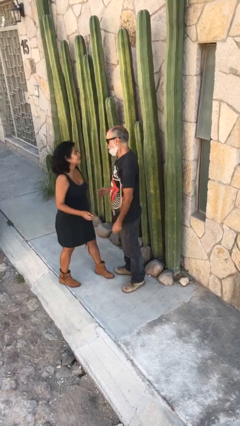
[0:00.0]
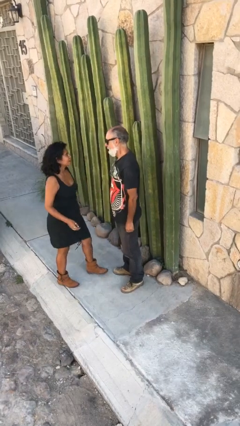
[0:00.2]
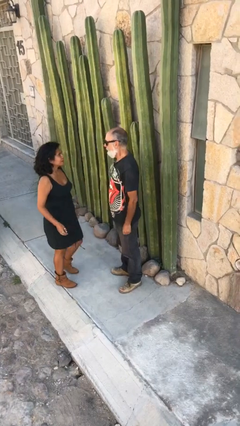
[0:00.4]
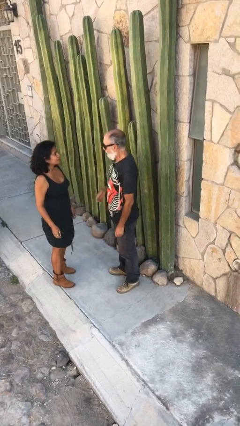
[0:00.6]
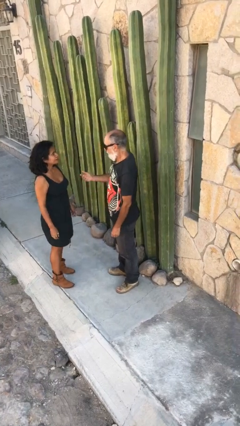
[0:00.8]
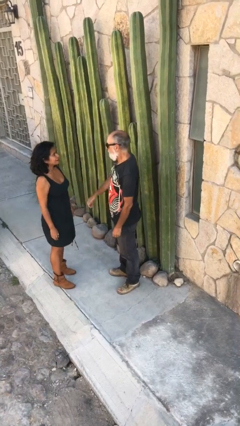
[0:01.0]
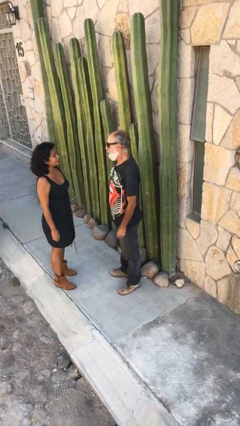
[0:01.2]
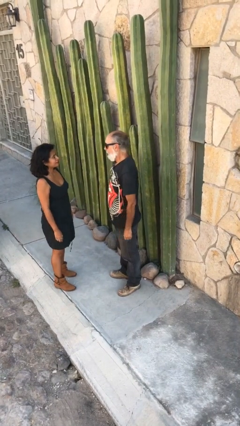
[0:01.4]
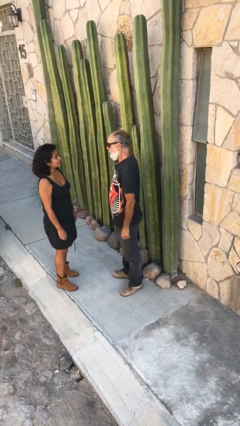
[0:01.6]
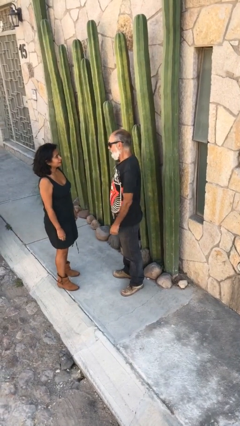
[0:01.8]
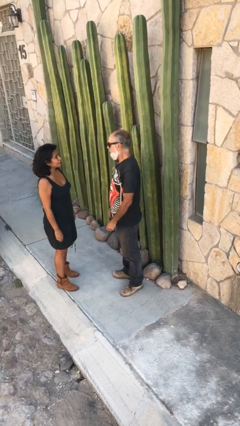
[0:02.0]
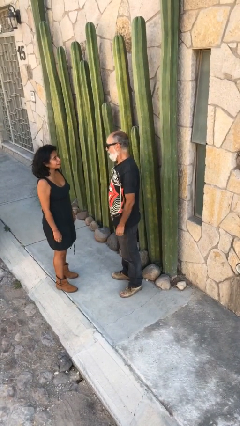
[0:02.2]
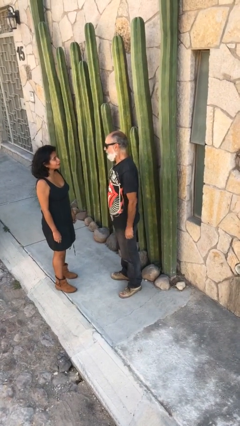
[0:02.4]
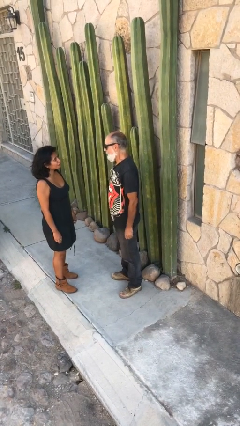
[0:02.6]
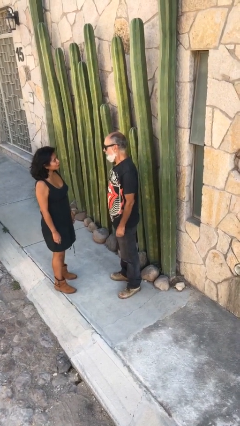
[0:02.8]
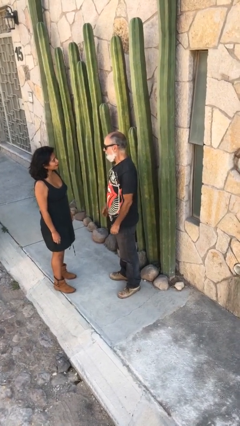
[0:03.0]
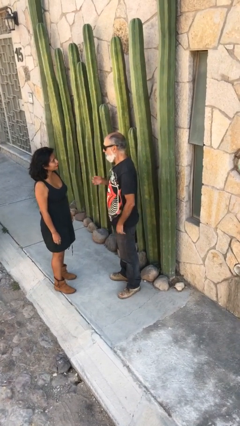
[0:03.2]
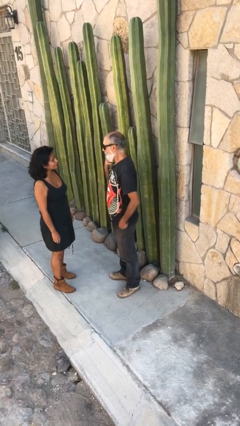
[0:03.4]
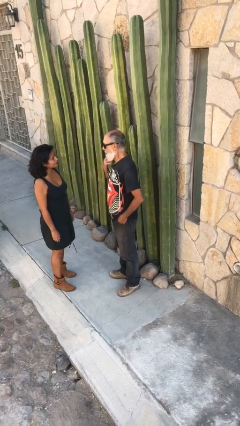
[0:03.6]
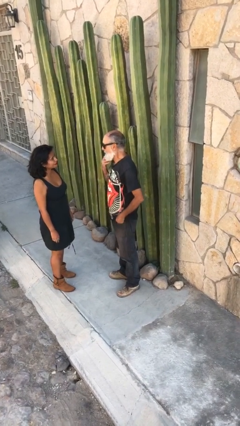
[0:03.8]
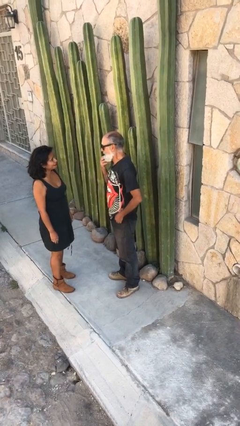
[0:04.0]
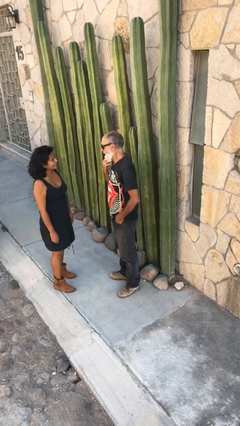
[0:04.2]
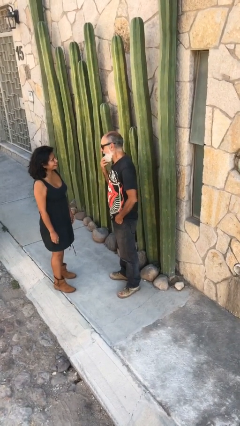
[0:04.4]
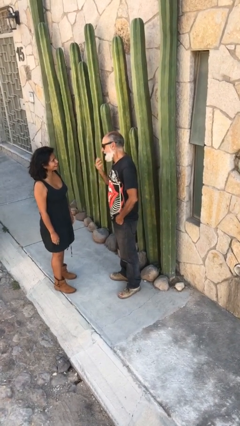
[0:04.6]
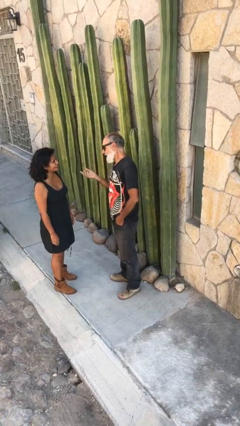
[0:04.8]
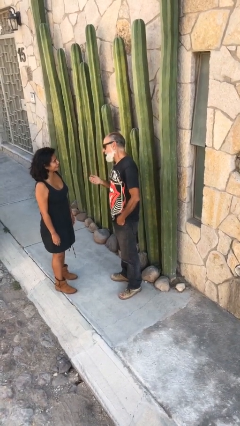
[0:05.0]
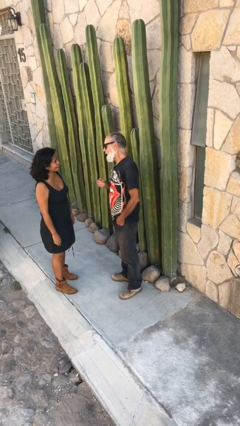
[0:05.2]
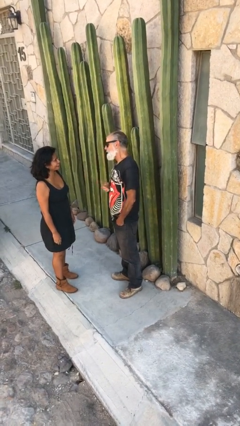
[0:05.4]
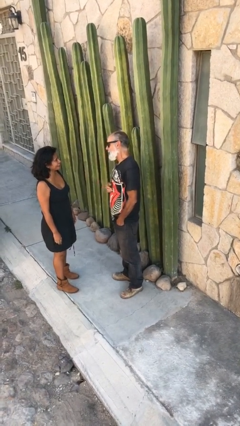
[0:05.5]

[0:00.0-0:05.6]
person talks to person

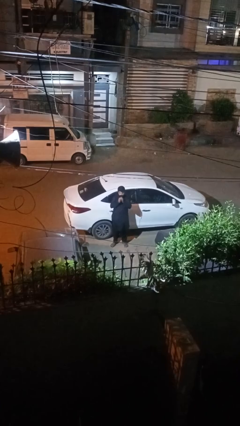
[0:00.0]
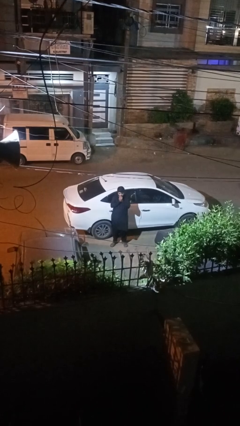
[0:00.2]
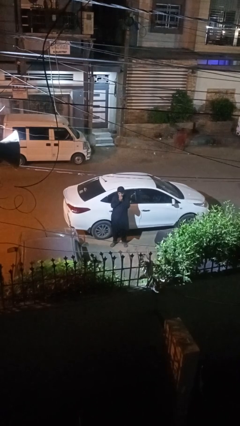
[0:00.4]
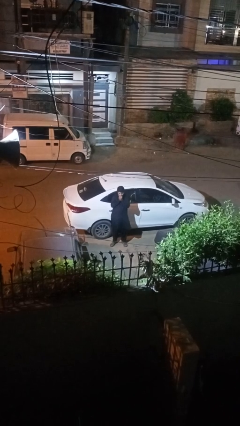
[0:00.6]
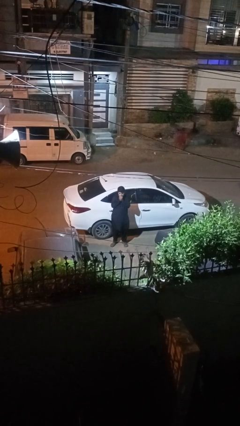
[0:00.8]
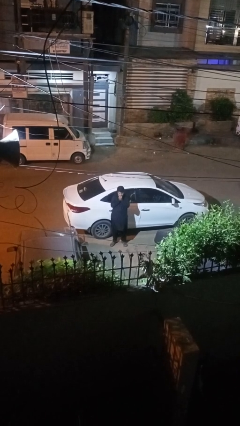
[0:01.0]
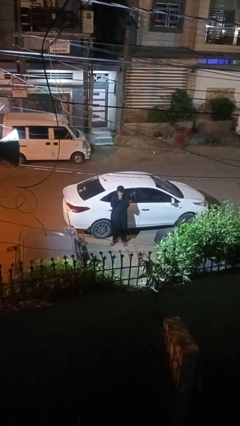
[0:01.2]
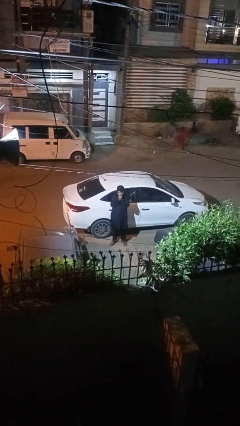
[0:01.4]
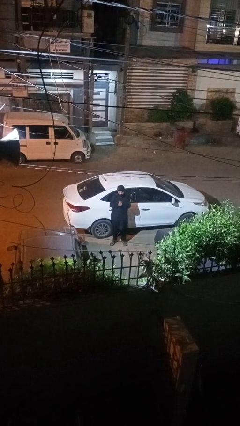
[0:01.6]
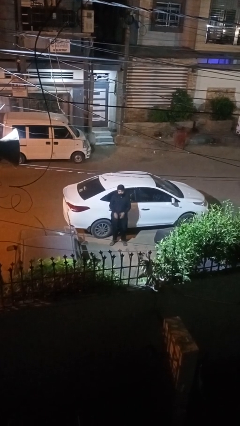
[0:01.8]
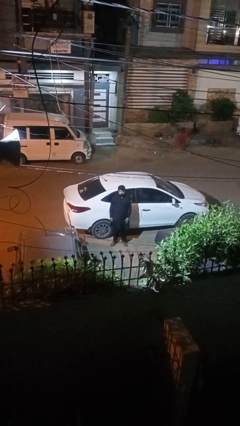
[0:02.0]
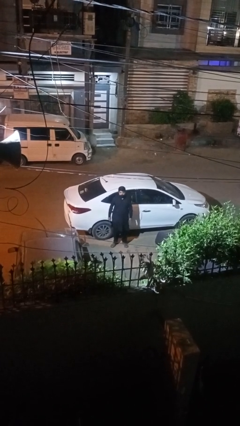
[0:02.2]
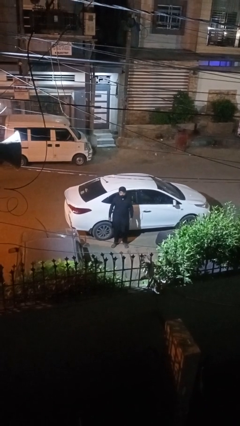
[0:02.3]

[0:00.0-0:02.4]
person blows into hands

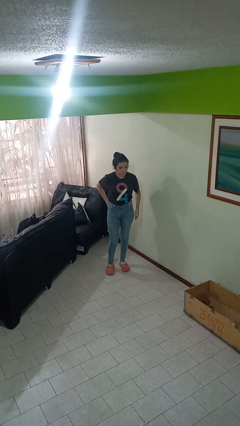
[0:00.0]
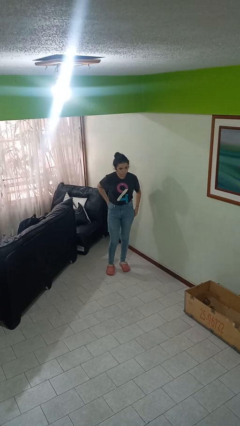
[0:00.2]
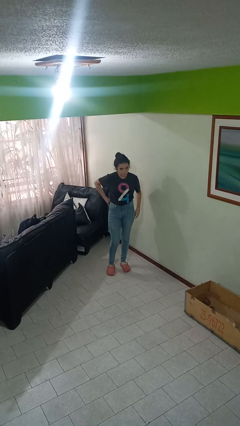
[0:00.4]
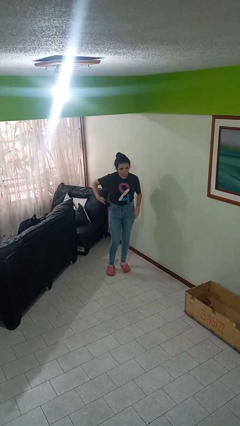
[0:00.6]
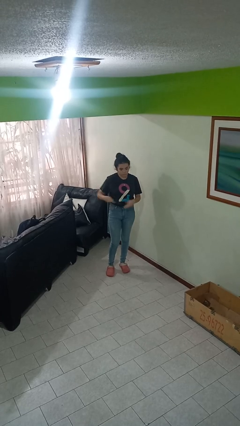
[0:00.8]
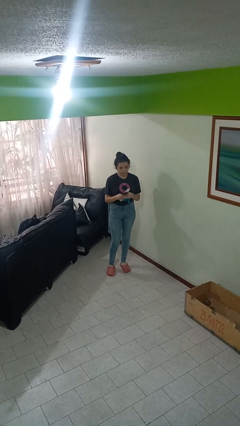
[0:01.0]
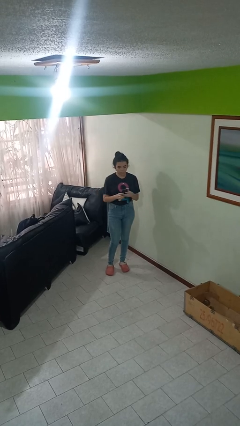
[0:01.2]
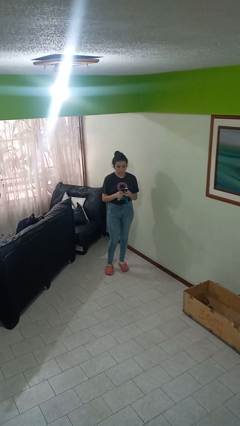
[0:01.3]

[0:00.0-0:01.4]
person takes phone from pocket

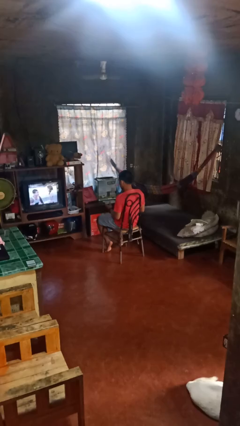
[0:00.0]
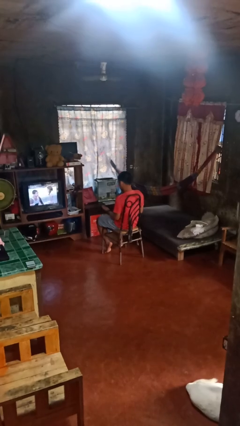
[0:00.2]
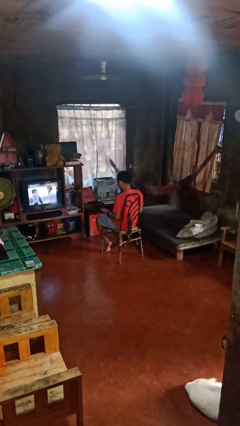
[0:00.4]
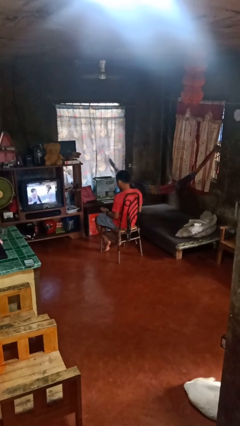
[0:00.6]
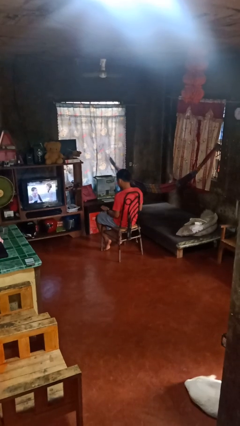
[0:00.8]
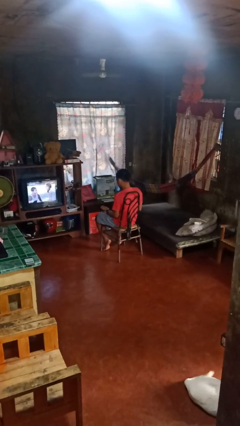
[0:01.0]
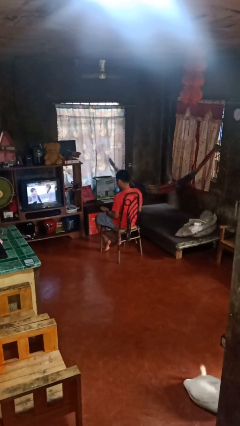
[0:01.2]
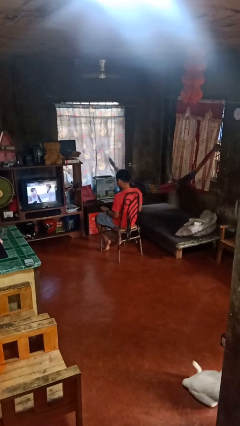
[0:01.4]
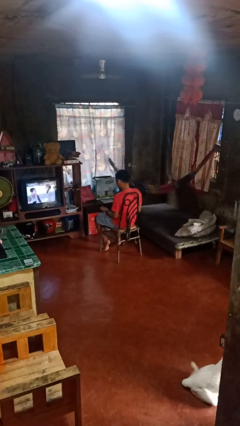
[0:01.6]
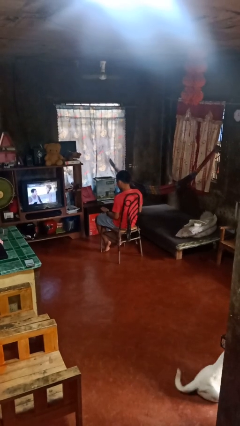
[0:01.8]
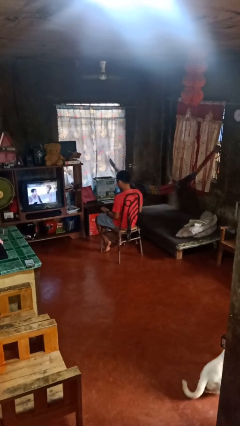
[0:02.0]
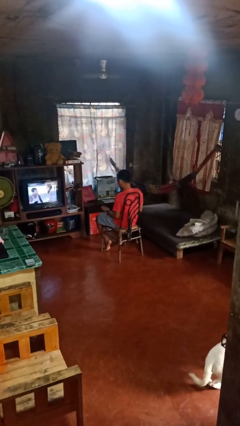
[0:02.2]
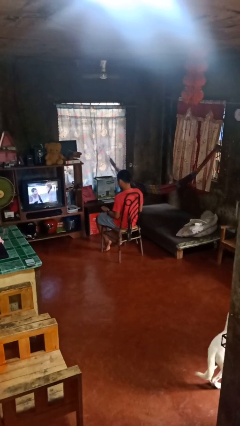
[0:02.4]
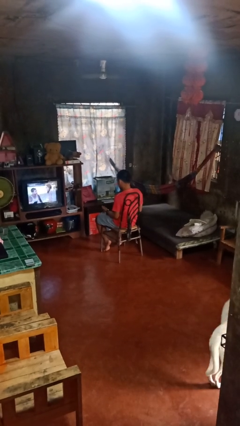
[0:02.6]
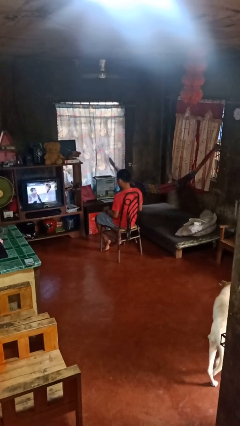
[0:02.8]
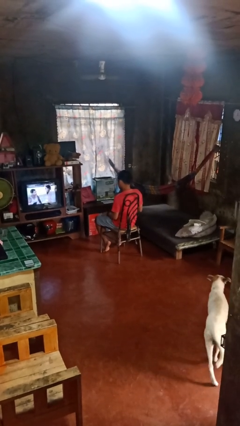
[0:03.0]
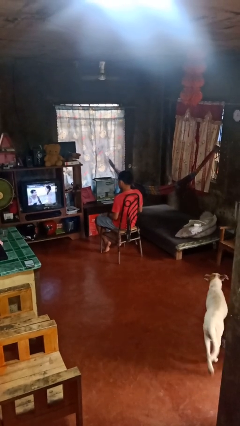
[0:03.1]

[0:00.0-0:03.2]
person looks at hands in lap

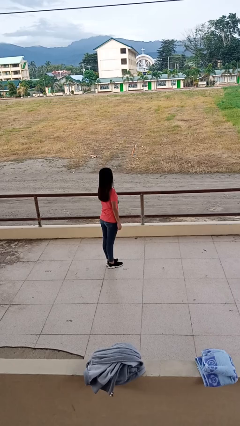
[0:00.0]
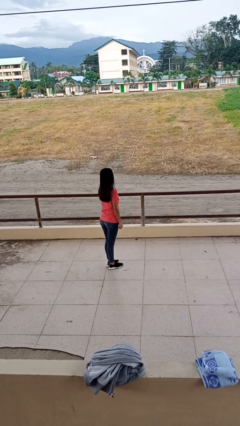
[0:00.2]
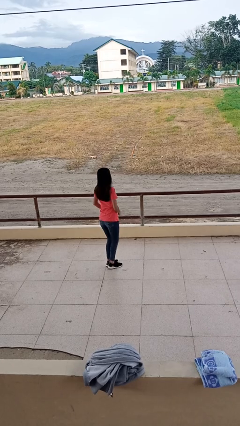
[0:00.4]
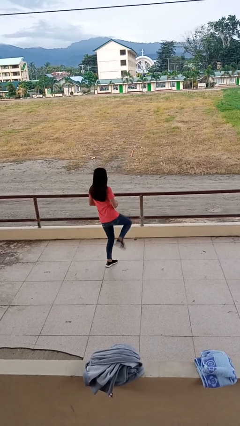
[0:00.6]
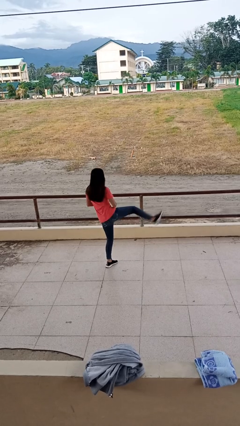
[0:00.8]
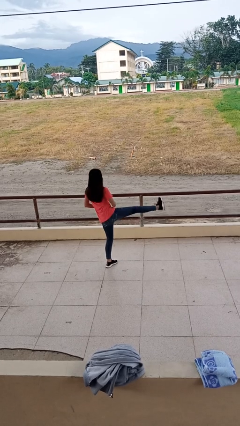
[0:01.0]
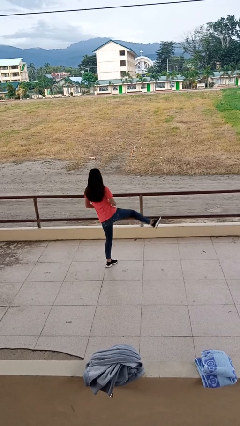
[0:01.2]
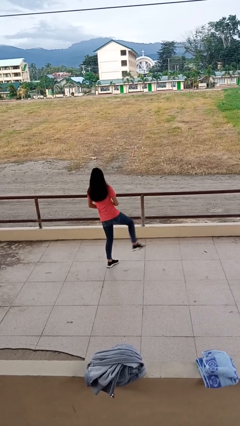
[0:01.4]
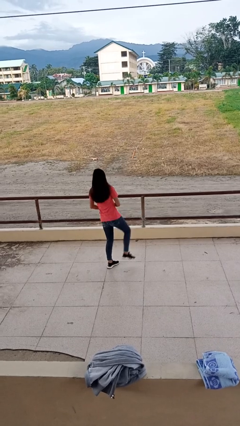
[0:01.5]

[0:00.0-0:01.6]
person karate kicks

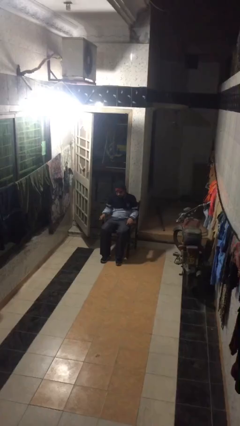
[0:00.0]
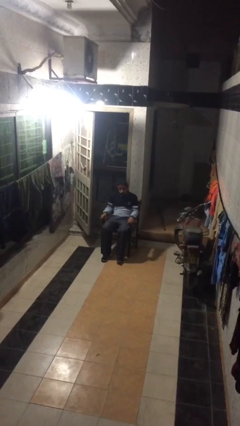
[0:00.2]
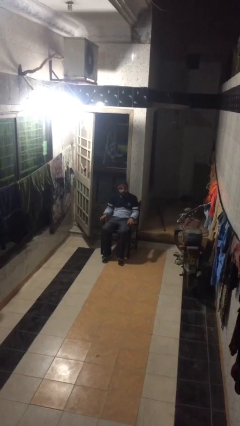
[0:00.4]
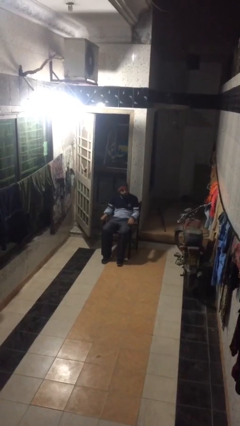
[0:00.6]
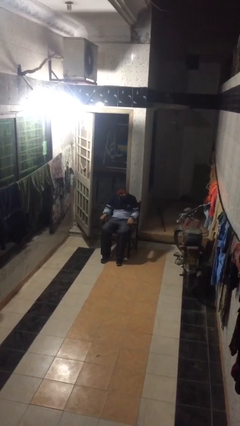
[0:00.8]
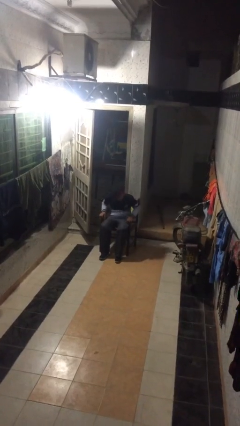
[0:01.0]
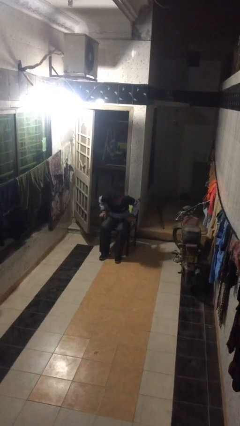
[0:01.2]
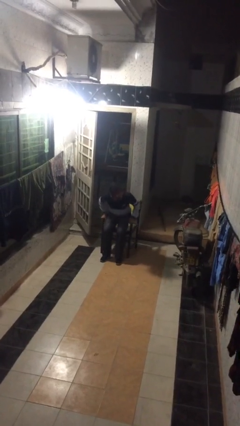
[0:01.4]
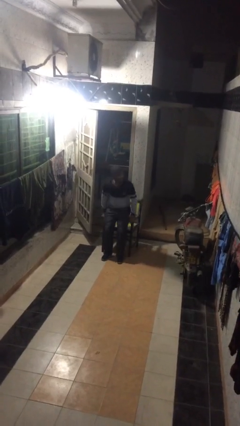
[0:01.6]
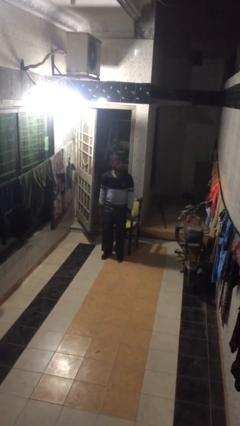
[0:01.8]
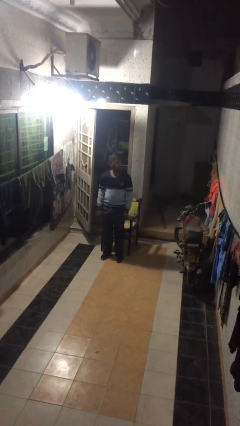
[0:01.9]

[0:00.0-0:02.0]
person stands up

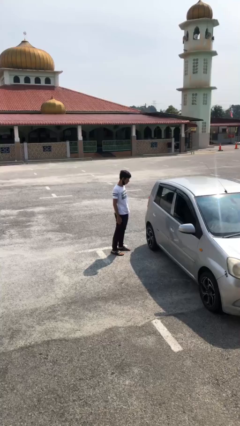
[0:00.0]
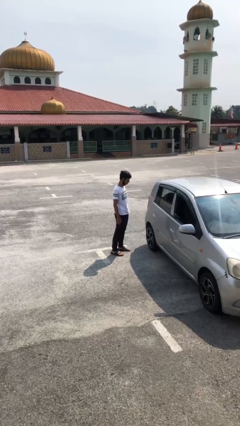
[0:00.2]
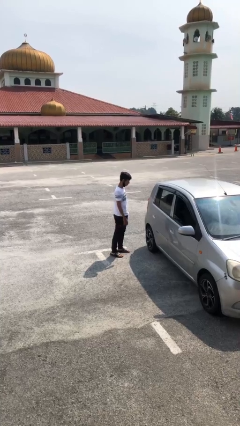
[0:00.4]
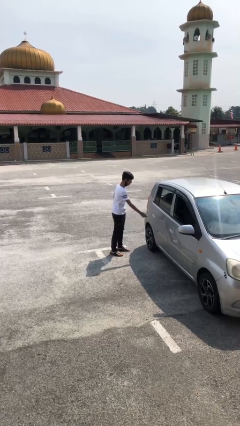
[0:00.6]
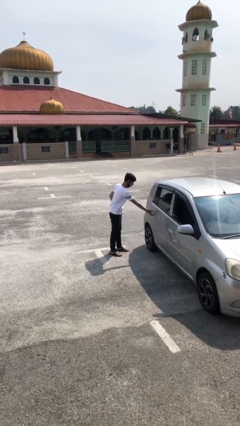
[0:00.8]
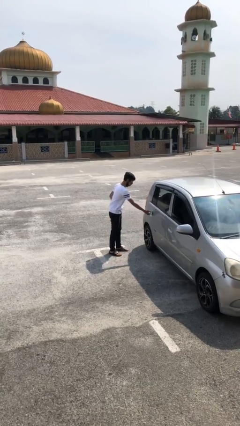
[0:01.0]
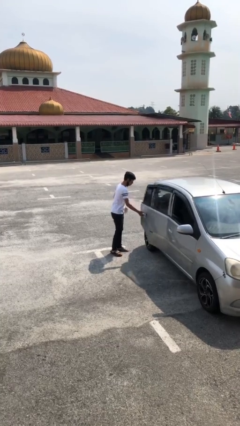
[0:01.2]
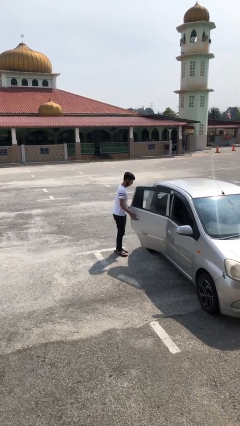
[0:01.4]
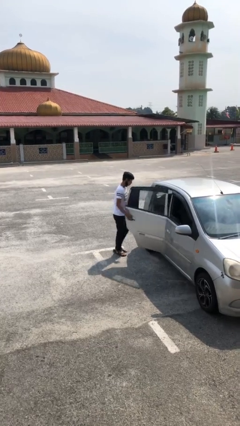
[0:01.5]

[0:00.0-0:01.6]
person opens car door
